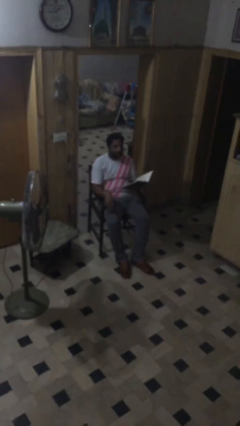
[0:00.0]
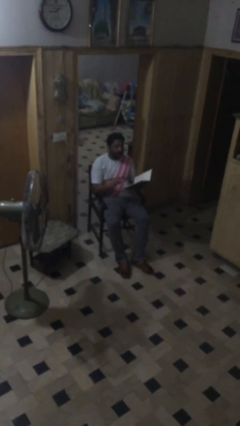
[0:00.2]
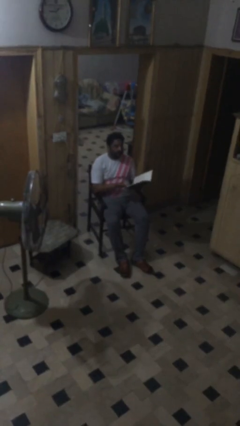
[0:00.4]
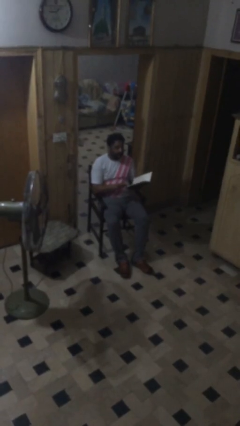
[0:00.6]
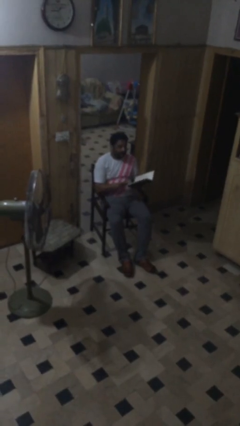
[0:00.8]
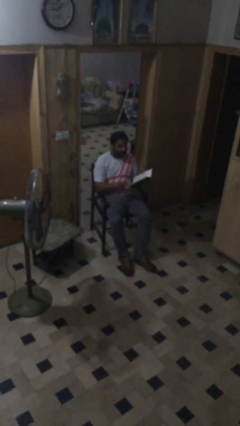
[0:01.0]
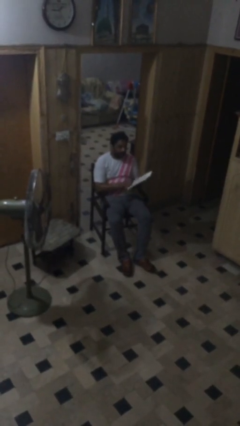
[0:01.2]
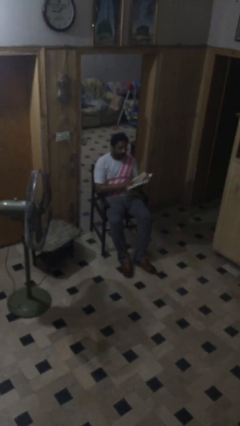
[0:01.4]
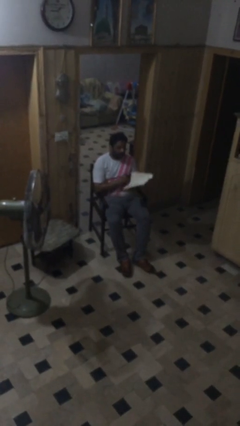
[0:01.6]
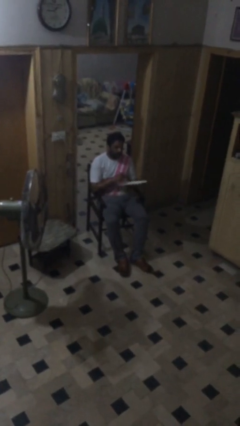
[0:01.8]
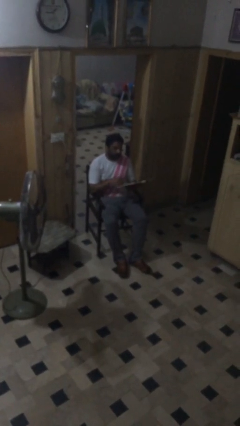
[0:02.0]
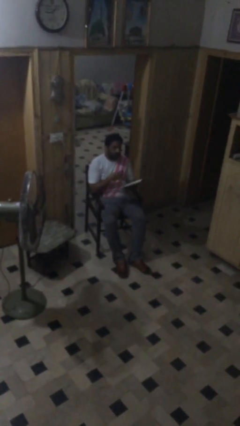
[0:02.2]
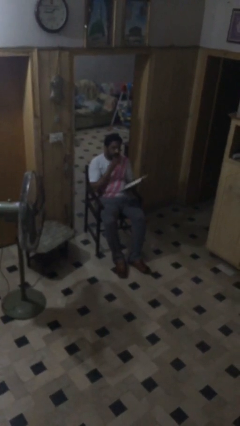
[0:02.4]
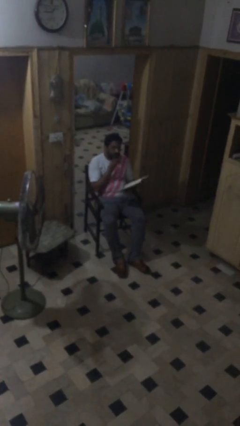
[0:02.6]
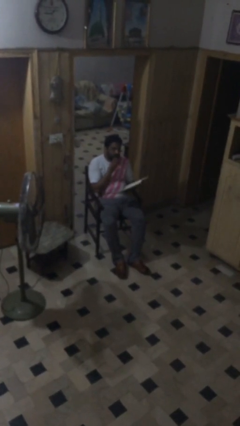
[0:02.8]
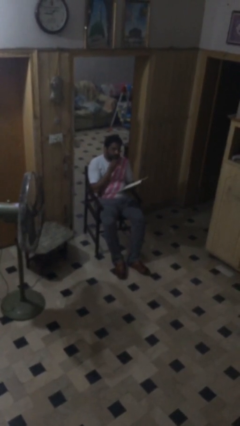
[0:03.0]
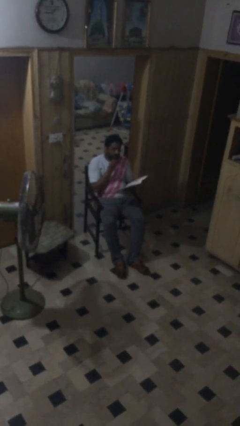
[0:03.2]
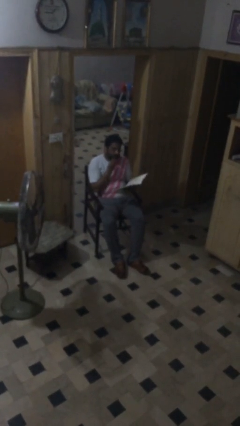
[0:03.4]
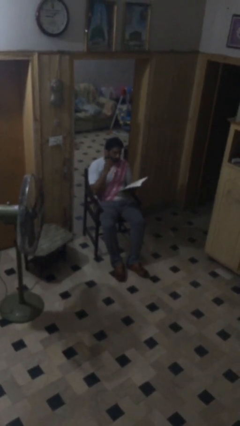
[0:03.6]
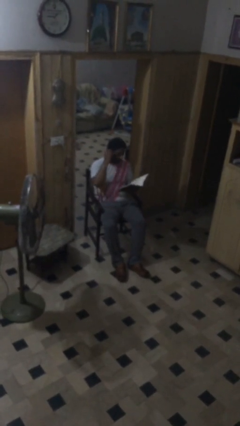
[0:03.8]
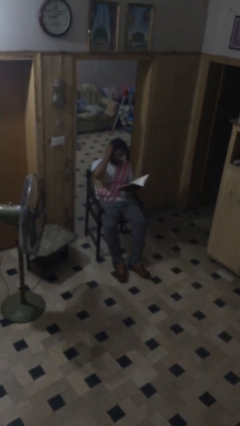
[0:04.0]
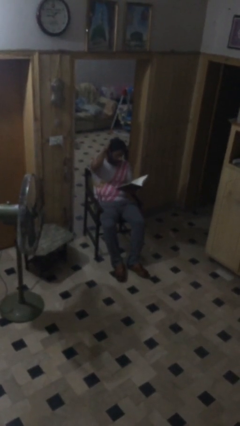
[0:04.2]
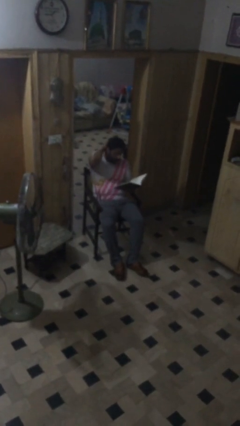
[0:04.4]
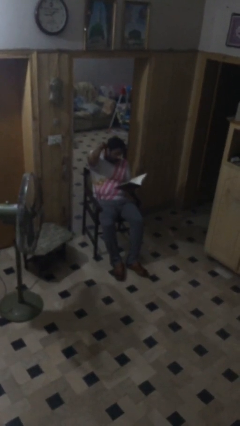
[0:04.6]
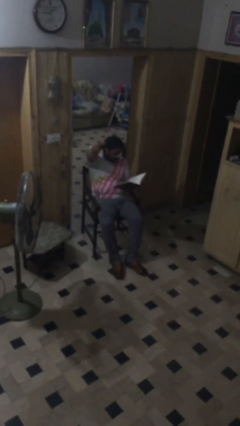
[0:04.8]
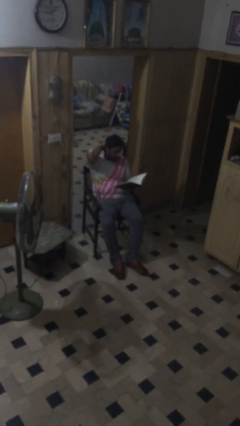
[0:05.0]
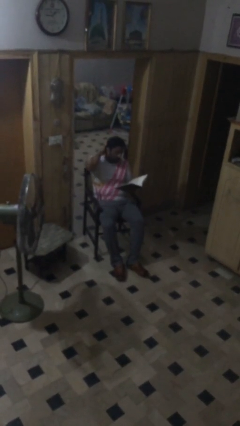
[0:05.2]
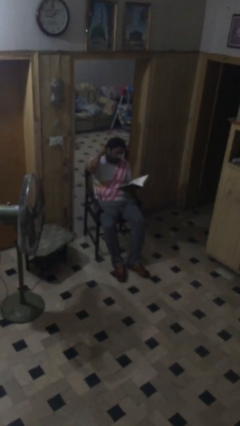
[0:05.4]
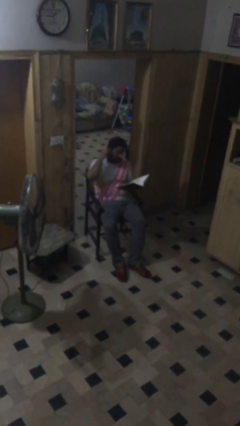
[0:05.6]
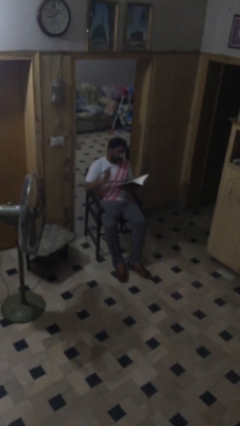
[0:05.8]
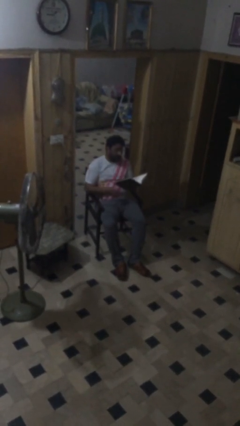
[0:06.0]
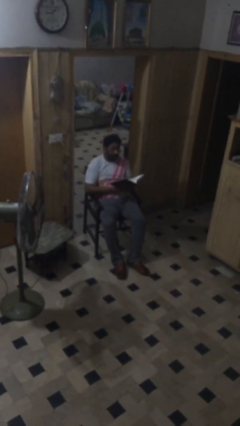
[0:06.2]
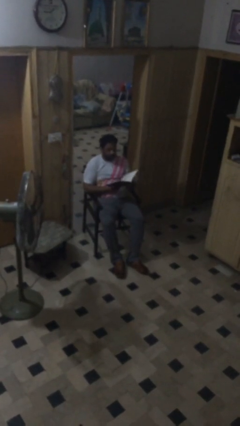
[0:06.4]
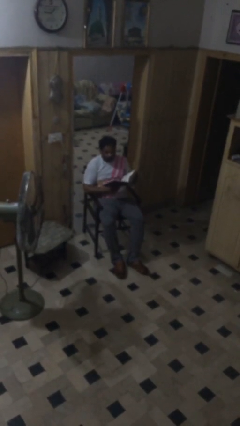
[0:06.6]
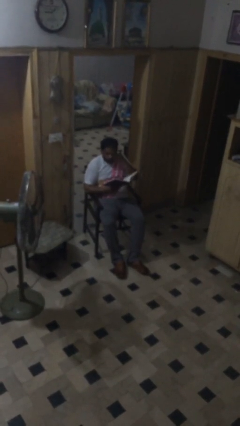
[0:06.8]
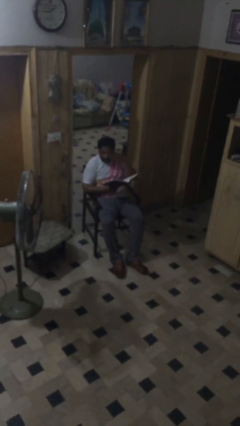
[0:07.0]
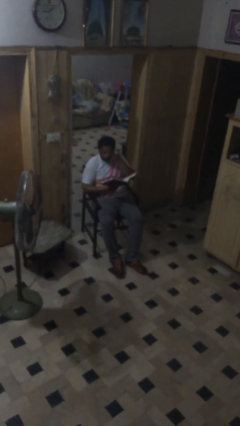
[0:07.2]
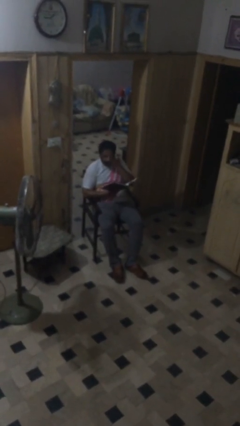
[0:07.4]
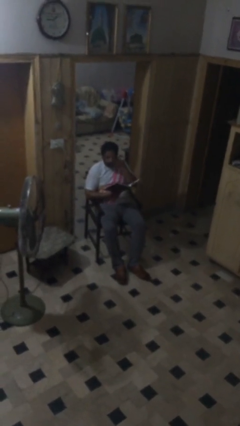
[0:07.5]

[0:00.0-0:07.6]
person reads document

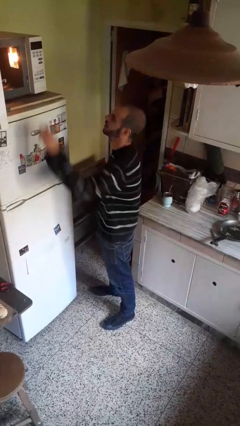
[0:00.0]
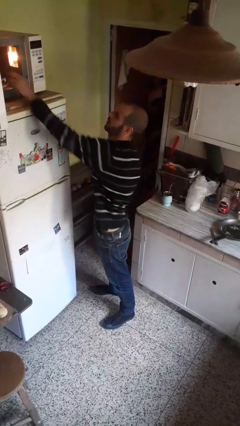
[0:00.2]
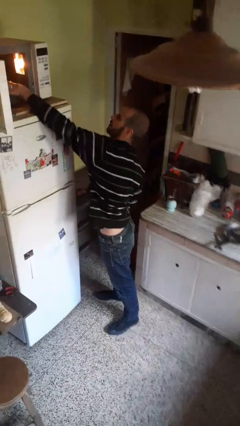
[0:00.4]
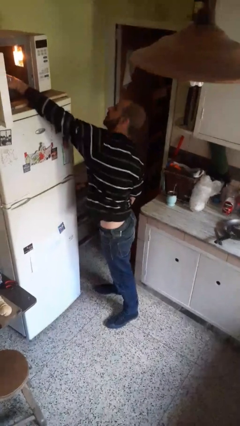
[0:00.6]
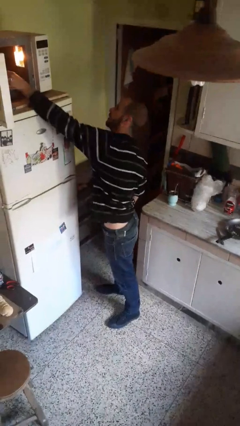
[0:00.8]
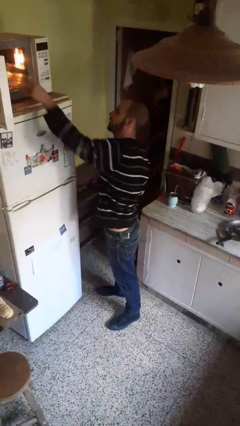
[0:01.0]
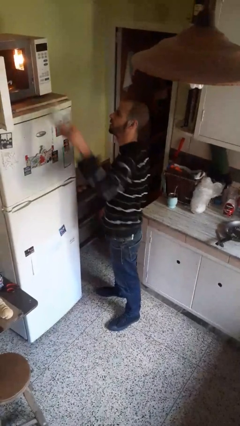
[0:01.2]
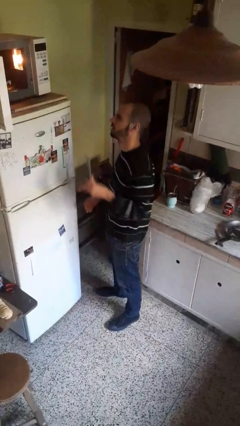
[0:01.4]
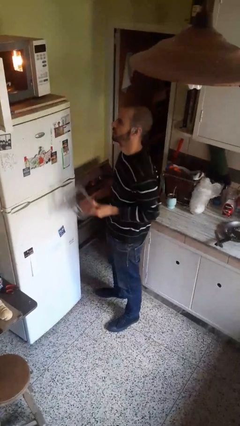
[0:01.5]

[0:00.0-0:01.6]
person takes object from microwave

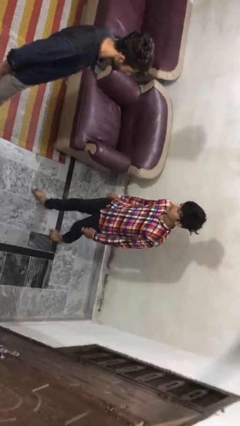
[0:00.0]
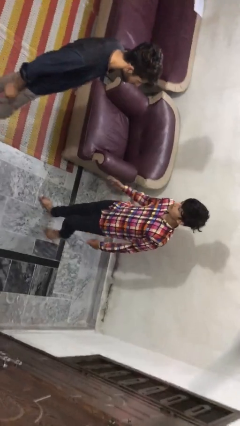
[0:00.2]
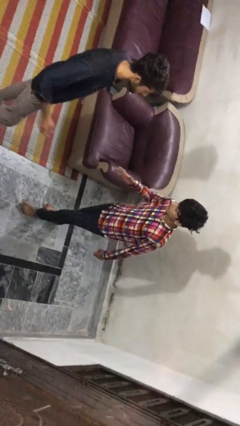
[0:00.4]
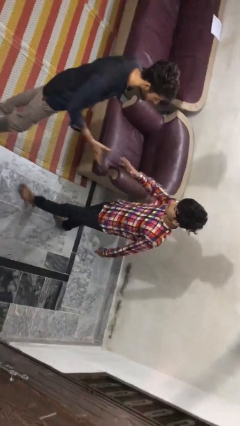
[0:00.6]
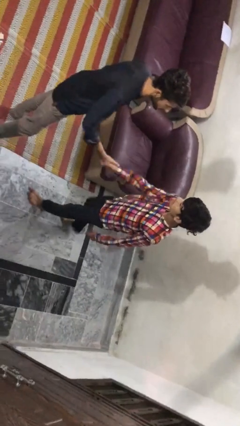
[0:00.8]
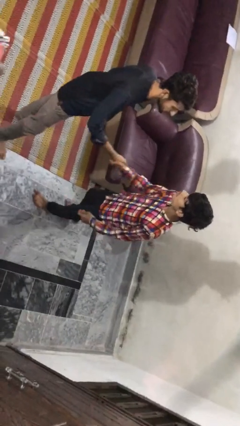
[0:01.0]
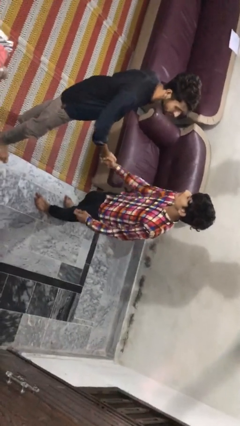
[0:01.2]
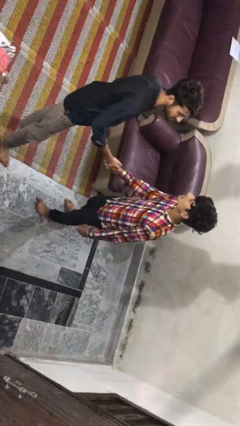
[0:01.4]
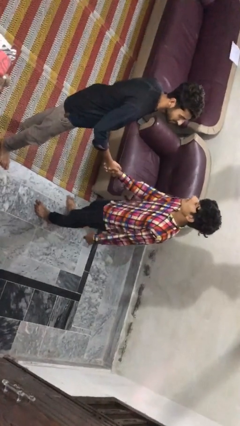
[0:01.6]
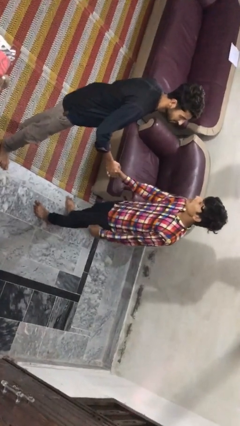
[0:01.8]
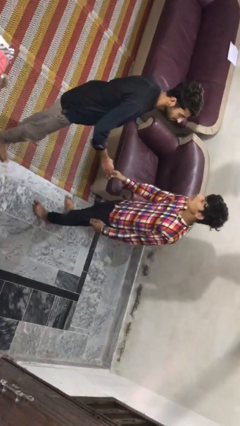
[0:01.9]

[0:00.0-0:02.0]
person shakes hand

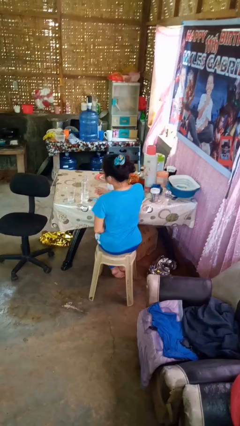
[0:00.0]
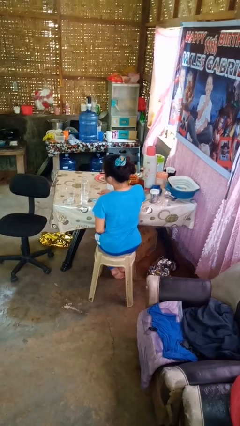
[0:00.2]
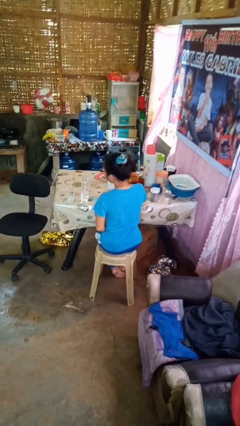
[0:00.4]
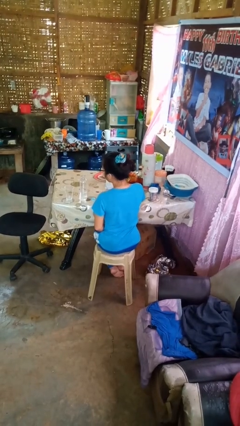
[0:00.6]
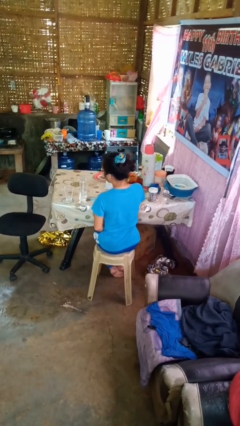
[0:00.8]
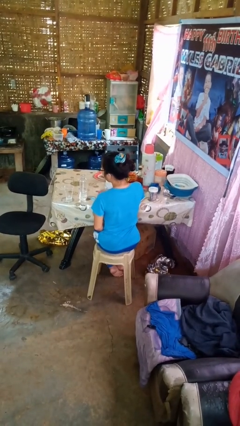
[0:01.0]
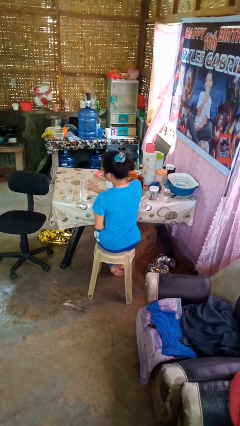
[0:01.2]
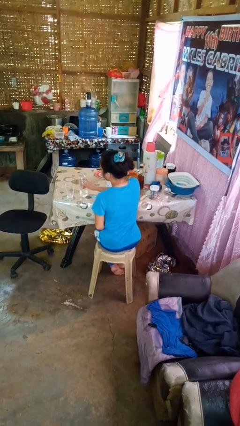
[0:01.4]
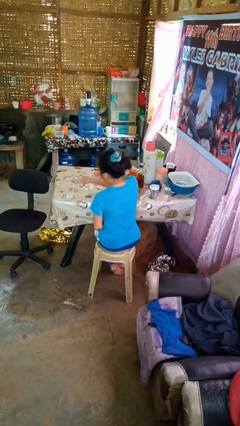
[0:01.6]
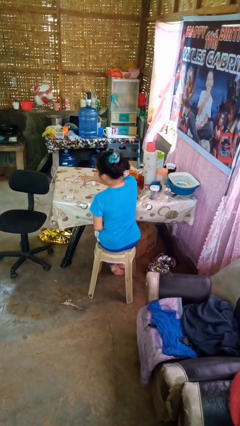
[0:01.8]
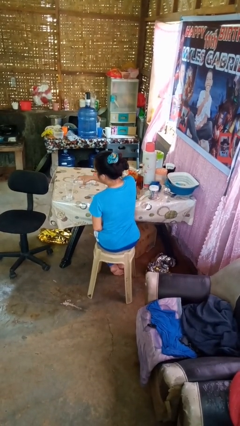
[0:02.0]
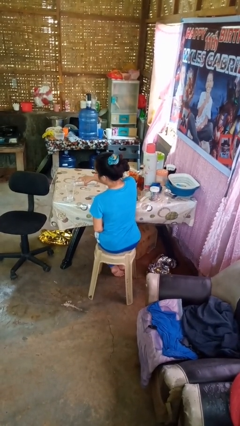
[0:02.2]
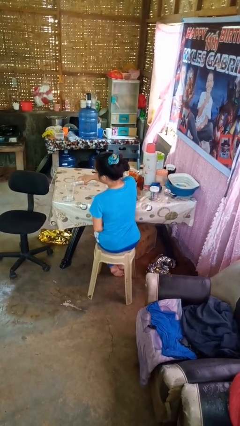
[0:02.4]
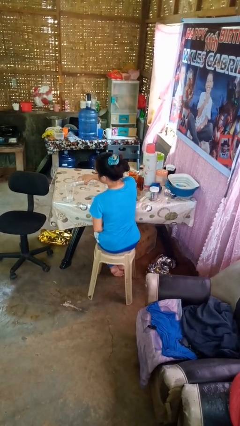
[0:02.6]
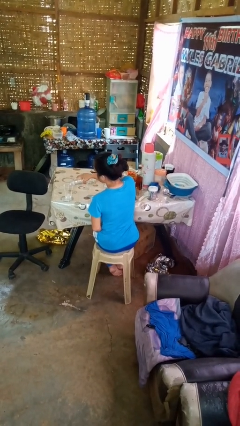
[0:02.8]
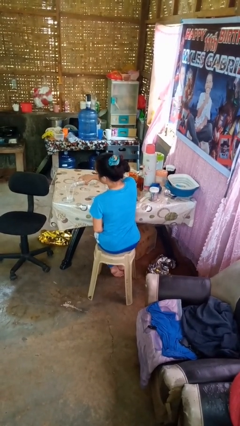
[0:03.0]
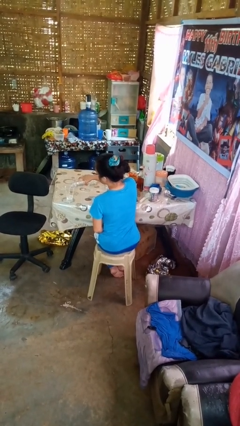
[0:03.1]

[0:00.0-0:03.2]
person pours liquid into cup

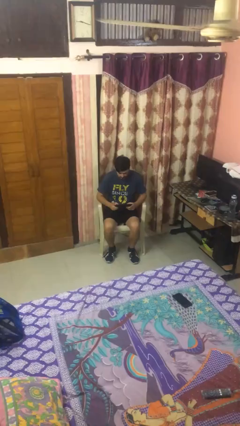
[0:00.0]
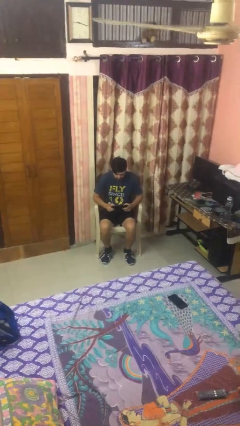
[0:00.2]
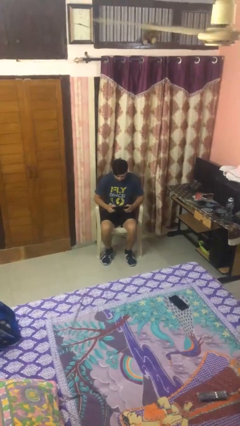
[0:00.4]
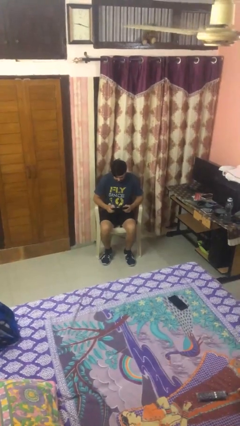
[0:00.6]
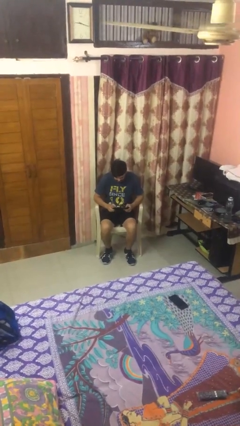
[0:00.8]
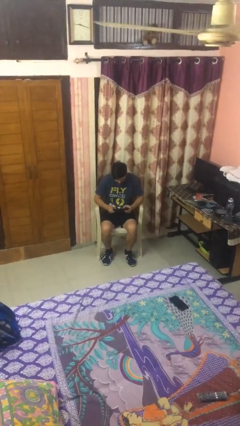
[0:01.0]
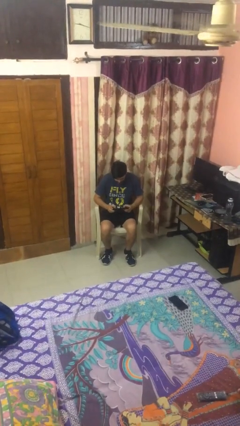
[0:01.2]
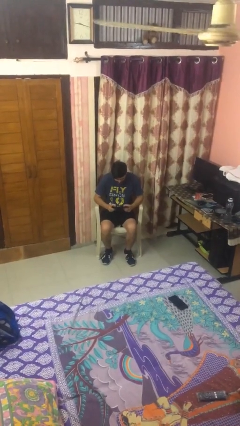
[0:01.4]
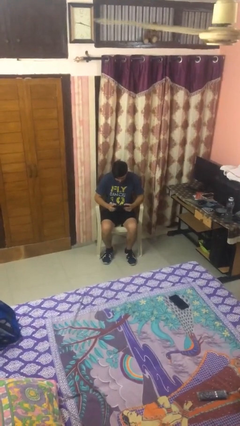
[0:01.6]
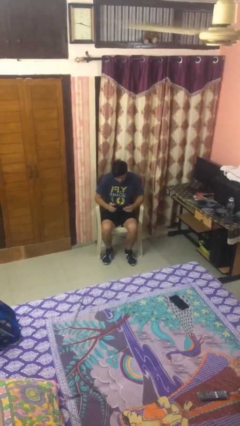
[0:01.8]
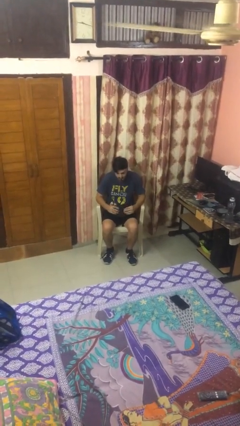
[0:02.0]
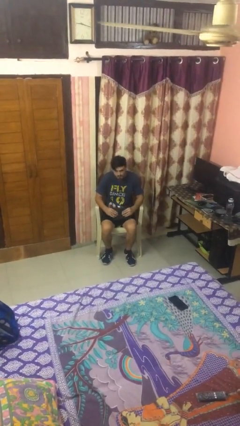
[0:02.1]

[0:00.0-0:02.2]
person interacts with handheld game

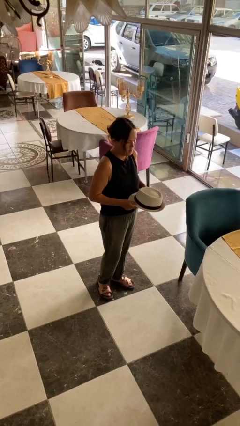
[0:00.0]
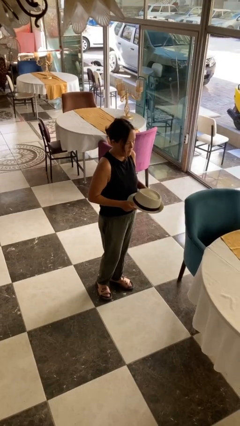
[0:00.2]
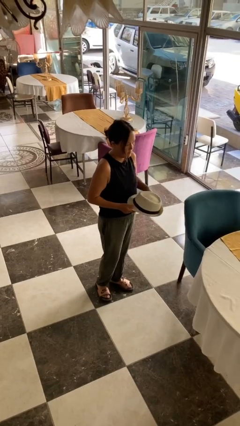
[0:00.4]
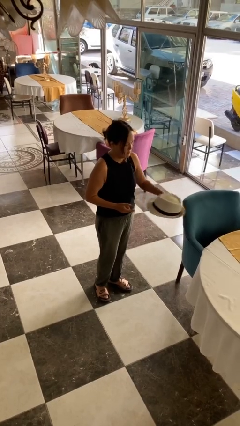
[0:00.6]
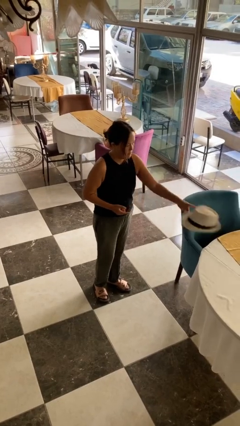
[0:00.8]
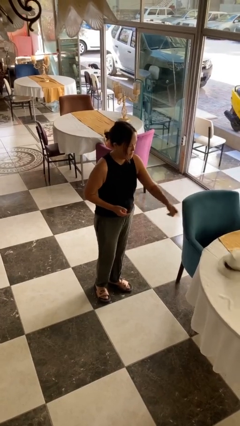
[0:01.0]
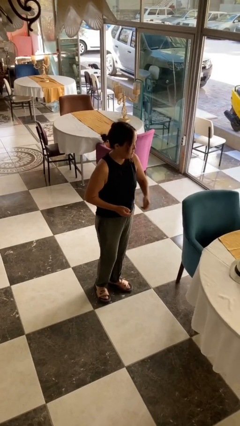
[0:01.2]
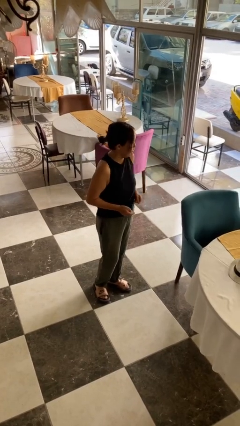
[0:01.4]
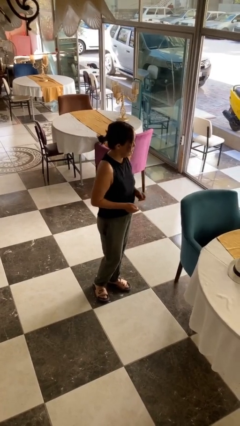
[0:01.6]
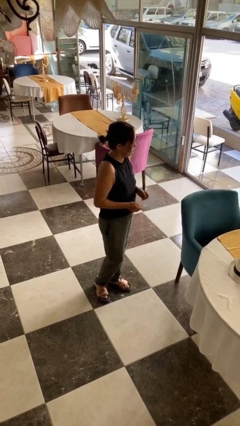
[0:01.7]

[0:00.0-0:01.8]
person throws object on table
